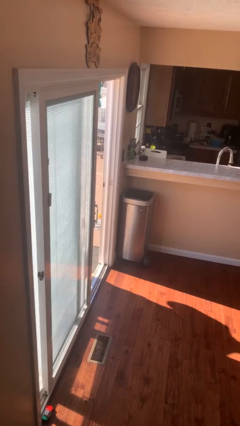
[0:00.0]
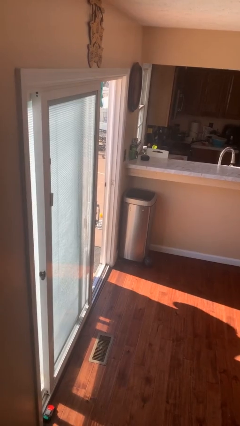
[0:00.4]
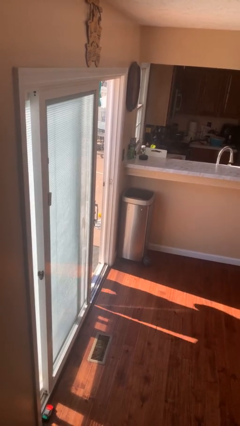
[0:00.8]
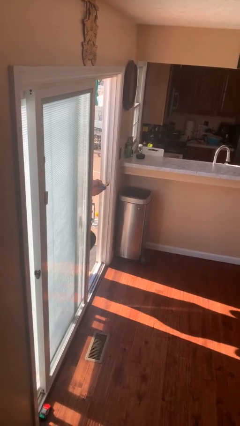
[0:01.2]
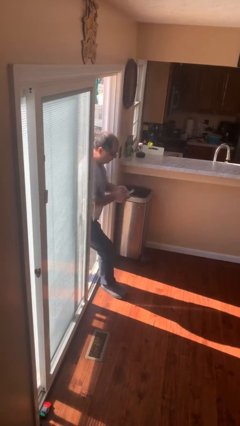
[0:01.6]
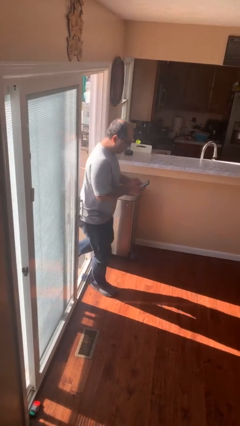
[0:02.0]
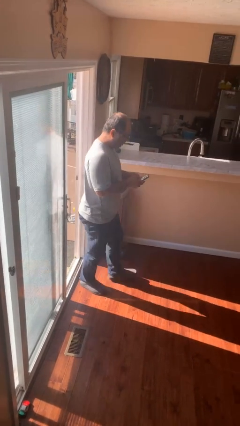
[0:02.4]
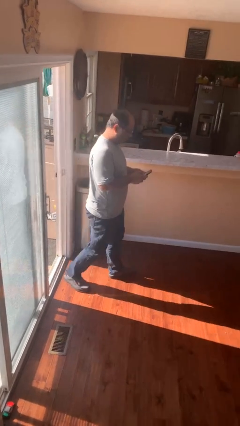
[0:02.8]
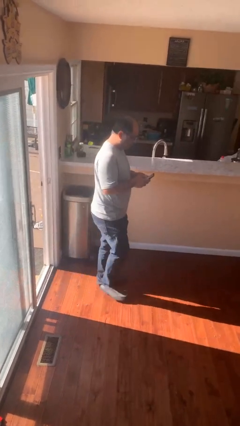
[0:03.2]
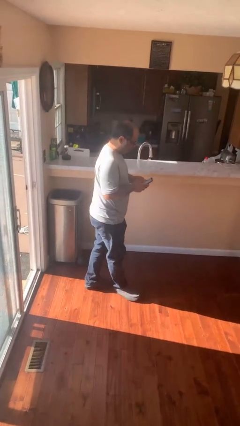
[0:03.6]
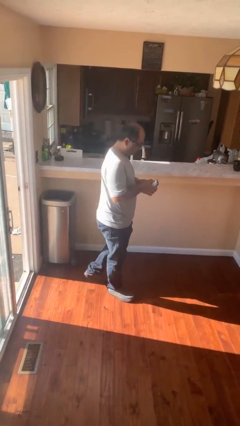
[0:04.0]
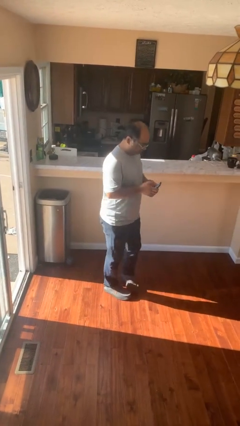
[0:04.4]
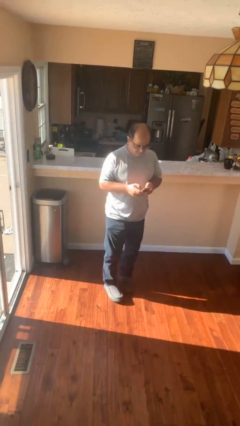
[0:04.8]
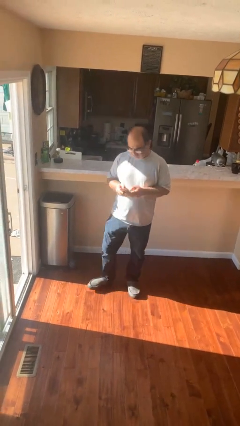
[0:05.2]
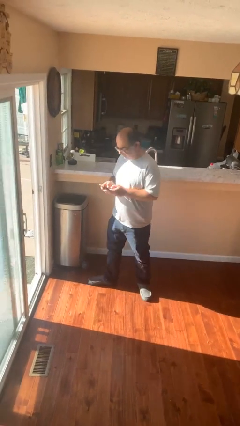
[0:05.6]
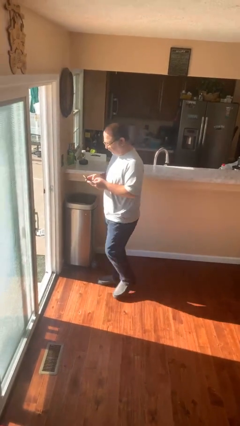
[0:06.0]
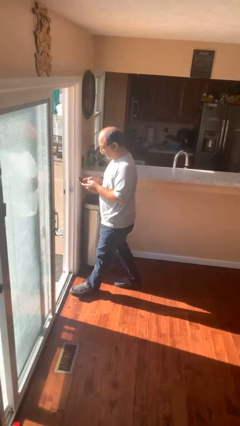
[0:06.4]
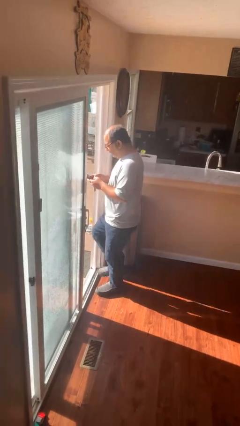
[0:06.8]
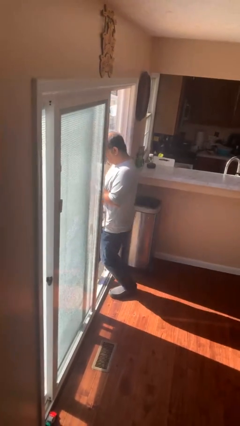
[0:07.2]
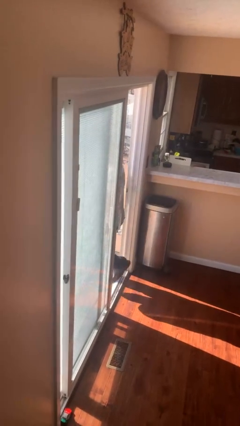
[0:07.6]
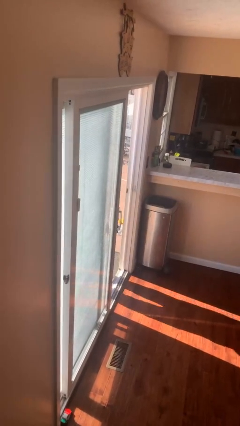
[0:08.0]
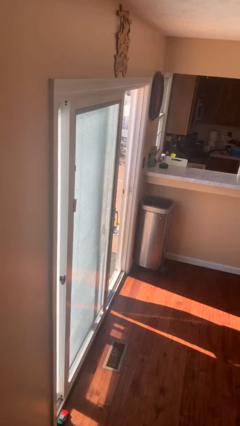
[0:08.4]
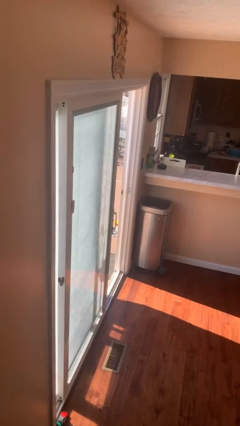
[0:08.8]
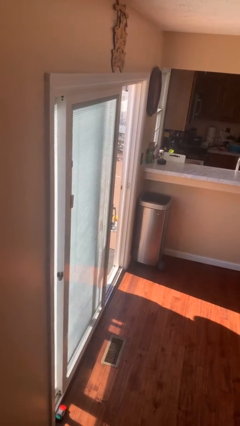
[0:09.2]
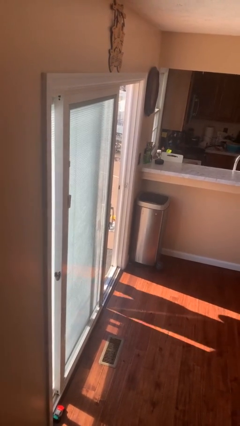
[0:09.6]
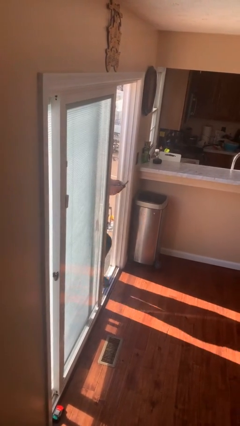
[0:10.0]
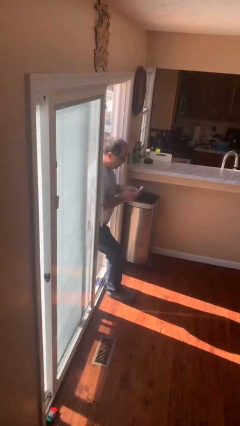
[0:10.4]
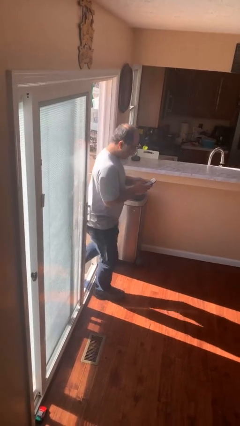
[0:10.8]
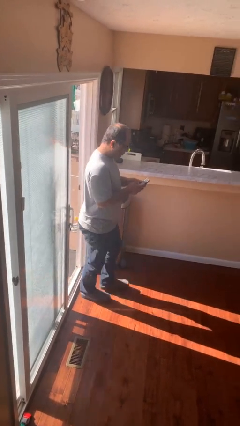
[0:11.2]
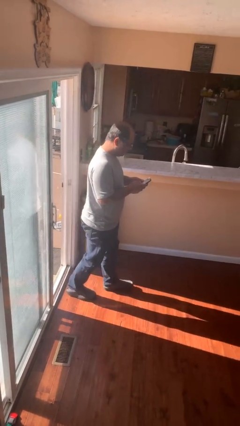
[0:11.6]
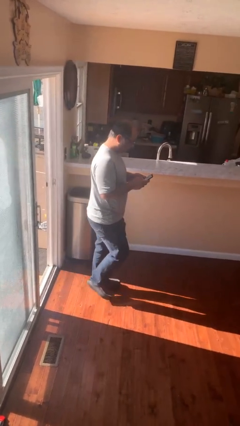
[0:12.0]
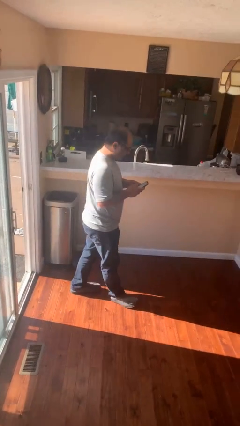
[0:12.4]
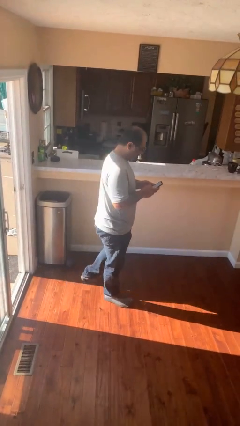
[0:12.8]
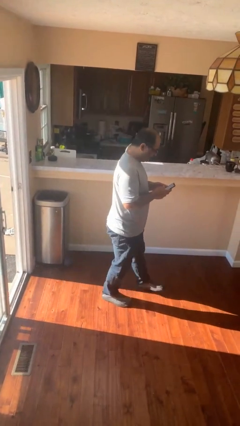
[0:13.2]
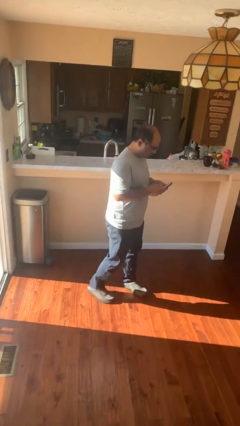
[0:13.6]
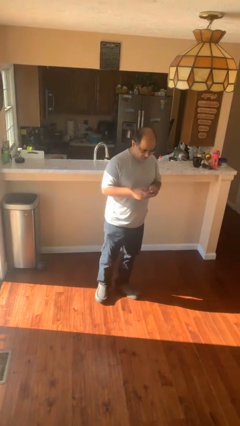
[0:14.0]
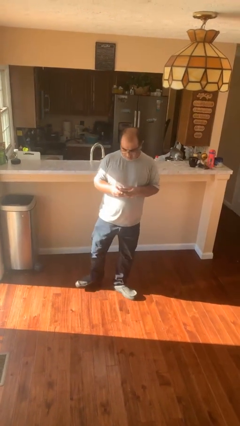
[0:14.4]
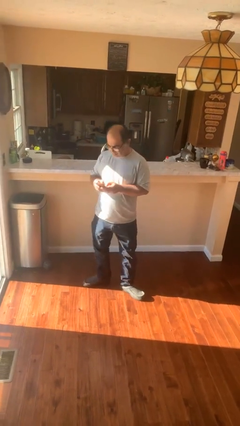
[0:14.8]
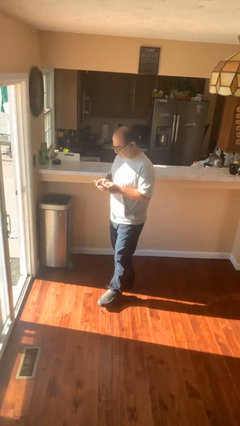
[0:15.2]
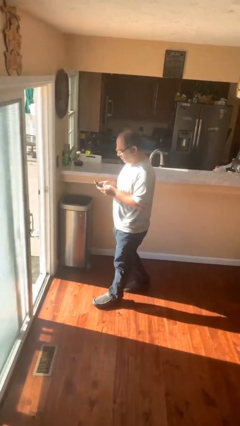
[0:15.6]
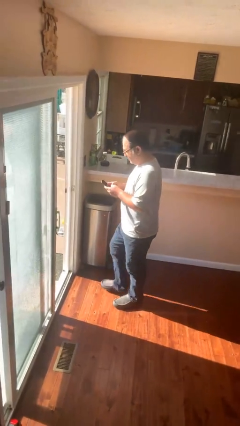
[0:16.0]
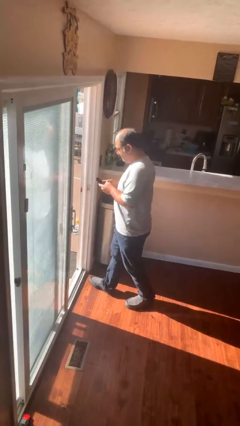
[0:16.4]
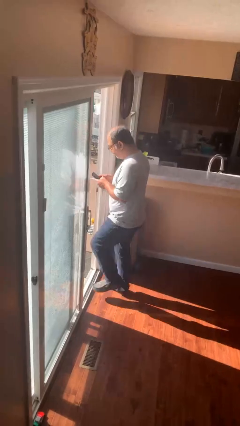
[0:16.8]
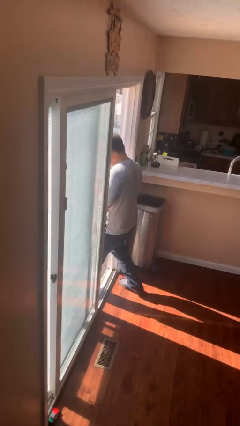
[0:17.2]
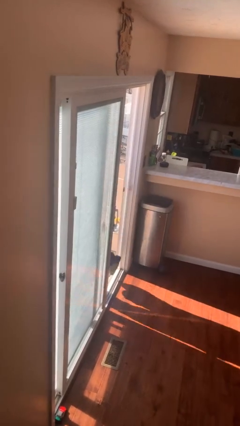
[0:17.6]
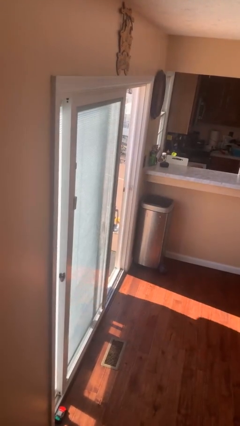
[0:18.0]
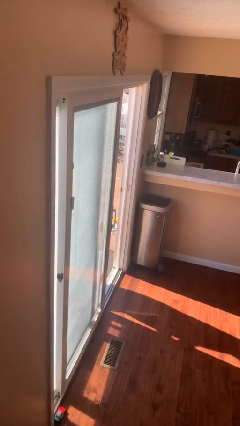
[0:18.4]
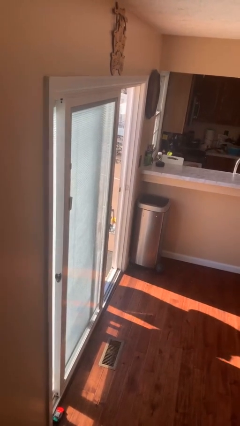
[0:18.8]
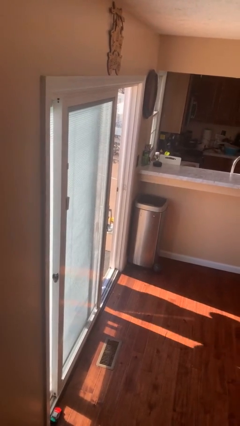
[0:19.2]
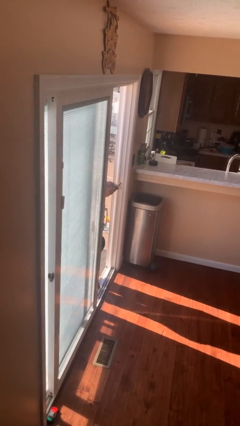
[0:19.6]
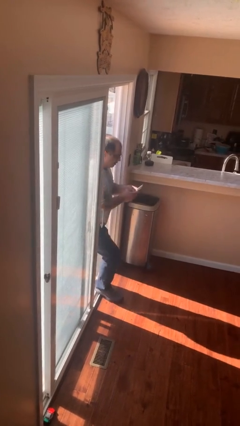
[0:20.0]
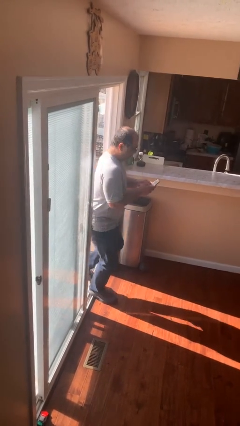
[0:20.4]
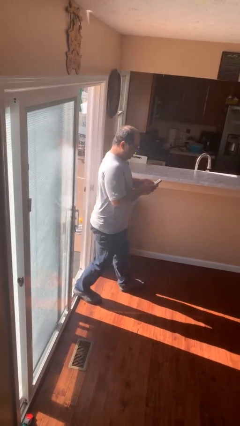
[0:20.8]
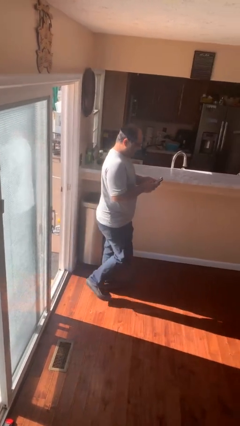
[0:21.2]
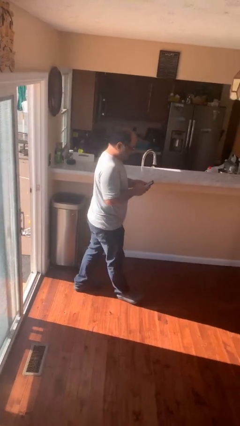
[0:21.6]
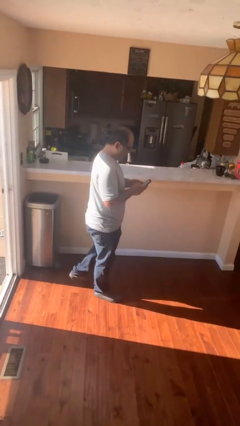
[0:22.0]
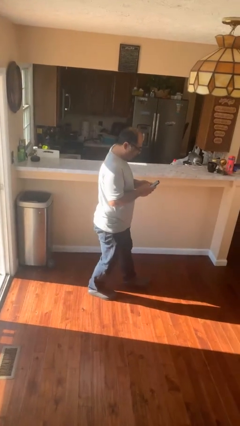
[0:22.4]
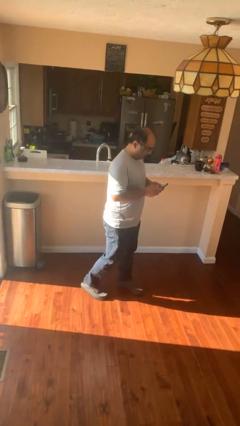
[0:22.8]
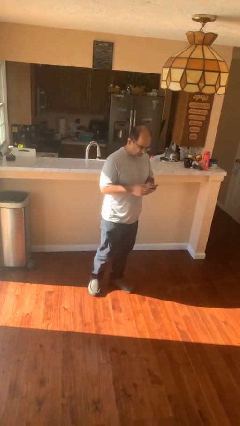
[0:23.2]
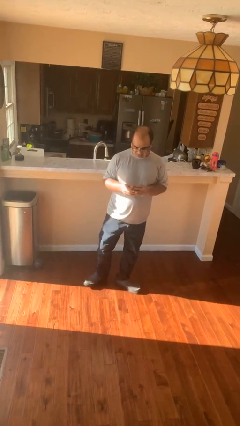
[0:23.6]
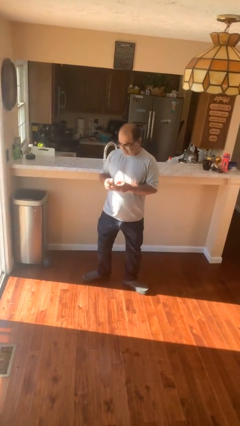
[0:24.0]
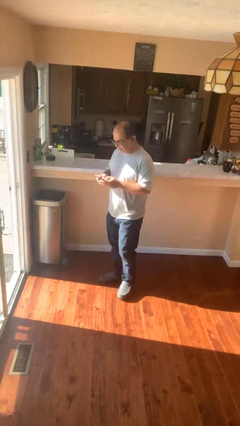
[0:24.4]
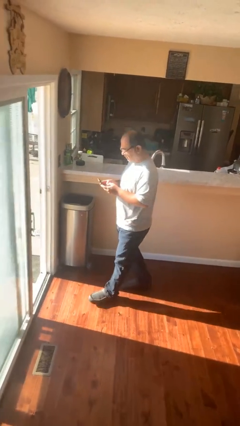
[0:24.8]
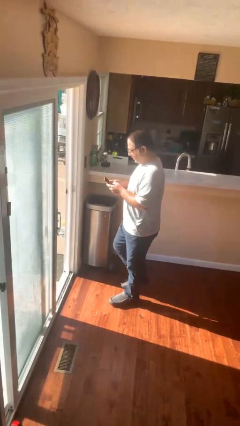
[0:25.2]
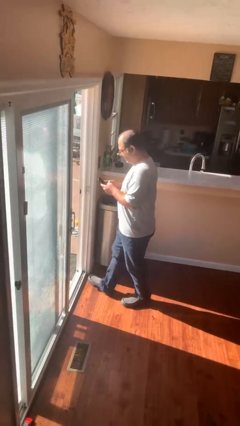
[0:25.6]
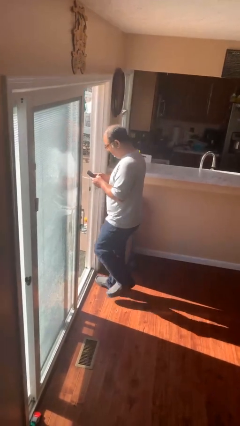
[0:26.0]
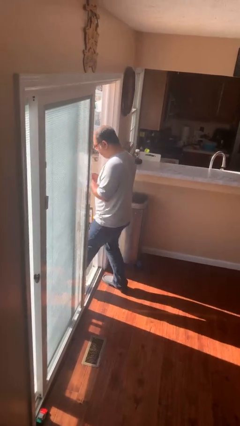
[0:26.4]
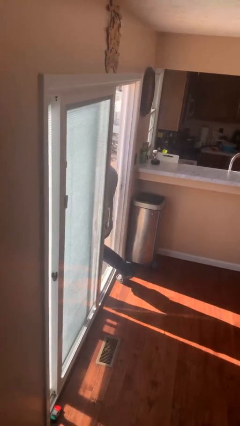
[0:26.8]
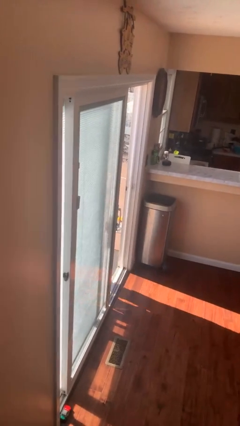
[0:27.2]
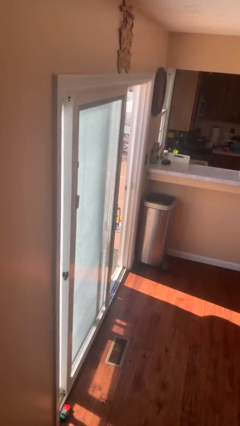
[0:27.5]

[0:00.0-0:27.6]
person texts on phone

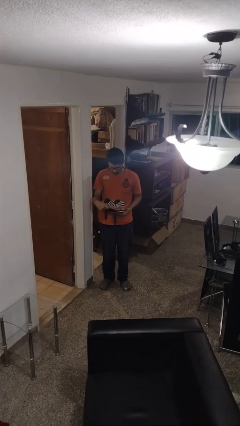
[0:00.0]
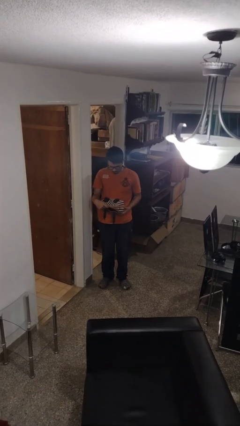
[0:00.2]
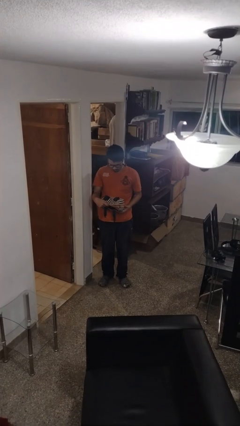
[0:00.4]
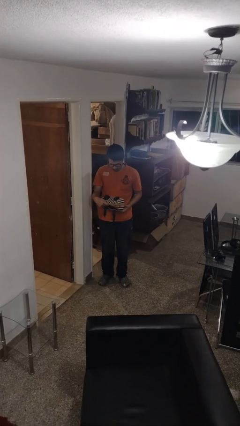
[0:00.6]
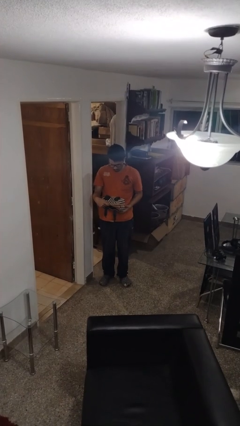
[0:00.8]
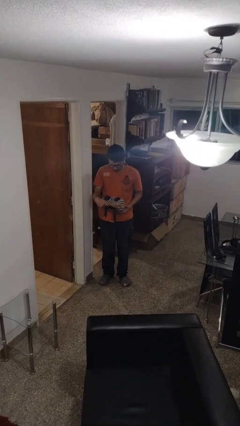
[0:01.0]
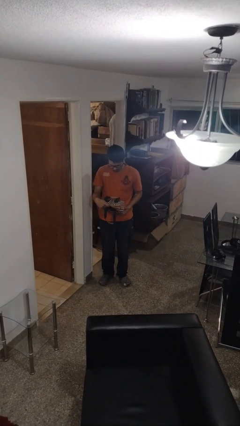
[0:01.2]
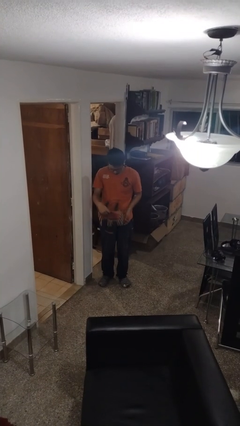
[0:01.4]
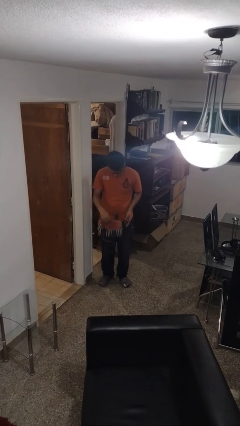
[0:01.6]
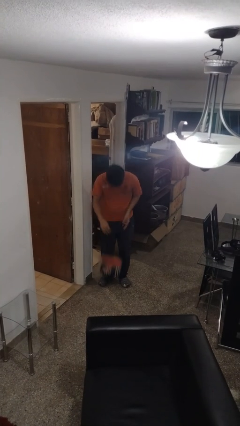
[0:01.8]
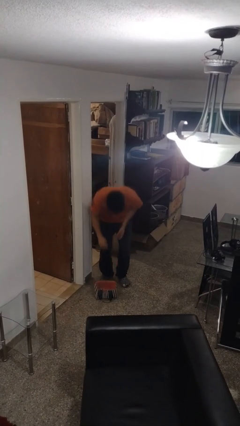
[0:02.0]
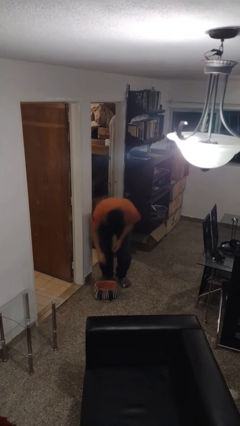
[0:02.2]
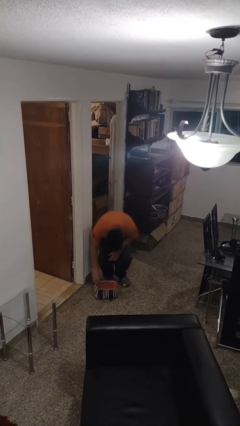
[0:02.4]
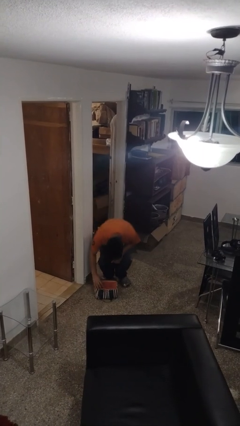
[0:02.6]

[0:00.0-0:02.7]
person drops object

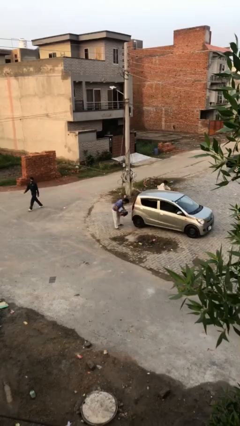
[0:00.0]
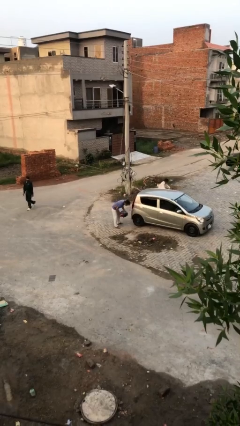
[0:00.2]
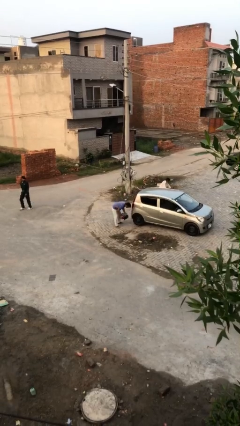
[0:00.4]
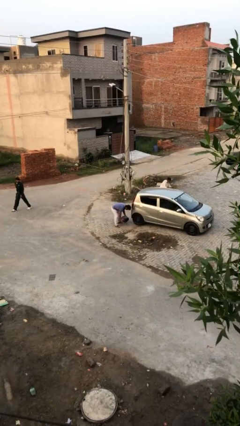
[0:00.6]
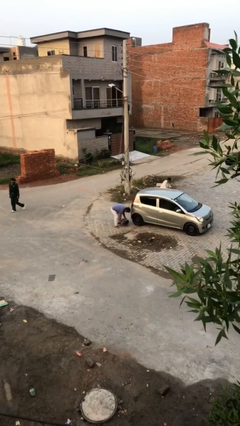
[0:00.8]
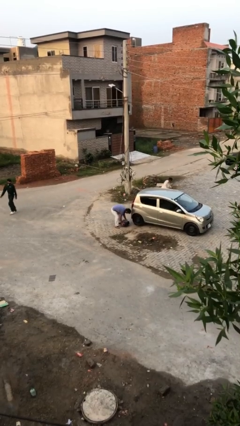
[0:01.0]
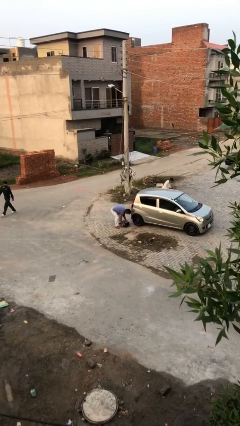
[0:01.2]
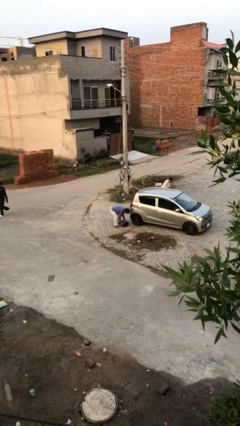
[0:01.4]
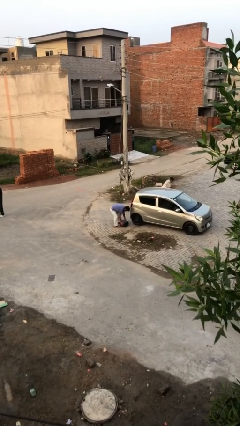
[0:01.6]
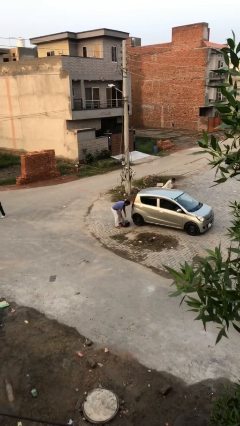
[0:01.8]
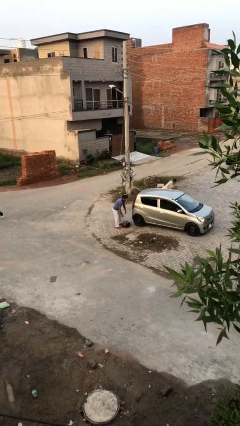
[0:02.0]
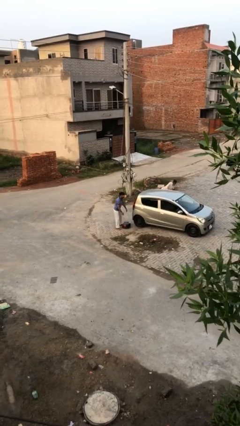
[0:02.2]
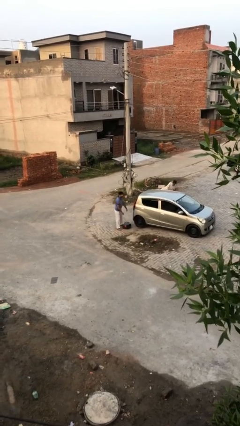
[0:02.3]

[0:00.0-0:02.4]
person puts down object on floor
